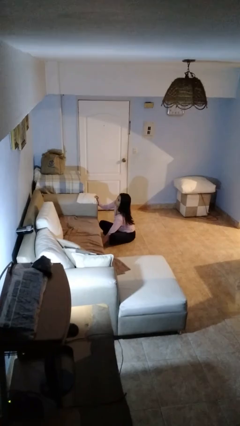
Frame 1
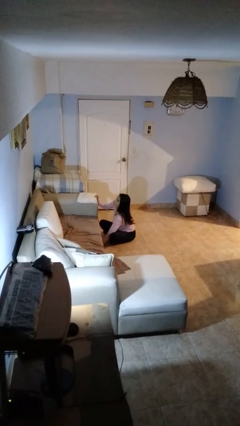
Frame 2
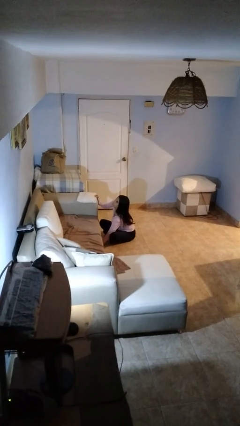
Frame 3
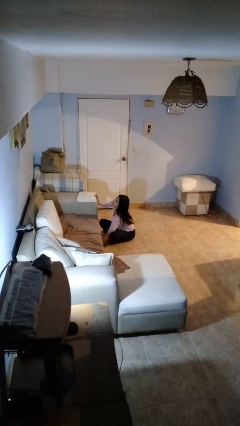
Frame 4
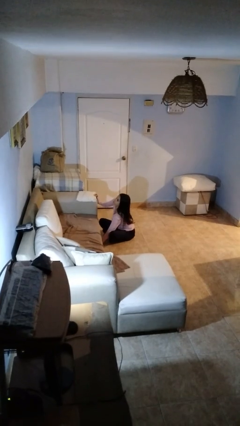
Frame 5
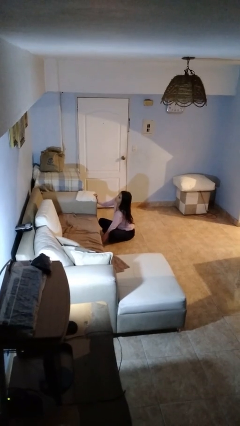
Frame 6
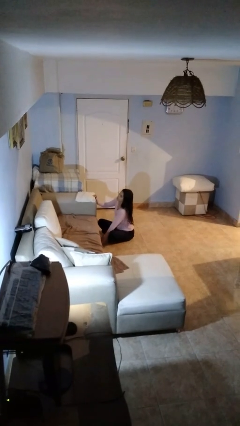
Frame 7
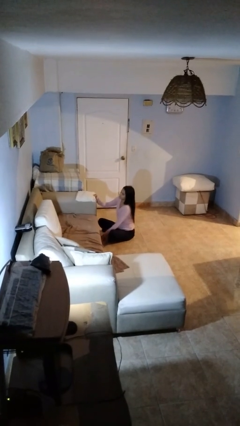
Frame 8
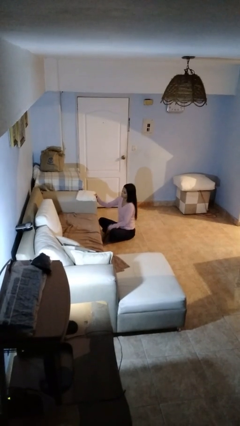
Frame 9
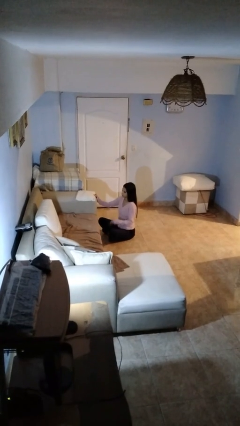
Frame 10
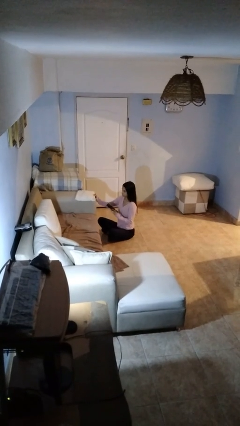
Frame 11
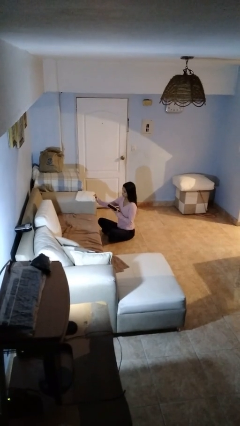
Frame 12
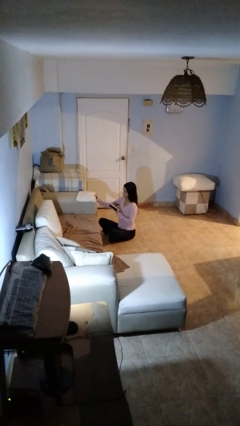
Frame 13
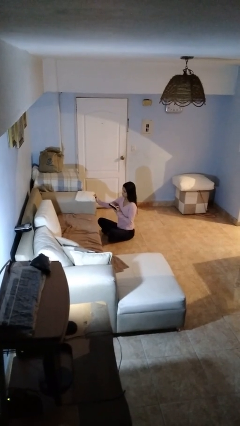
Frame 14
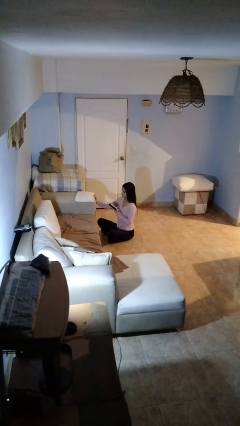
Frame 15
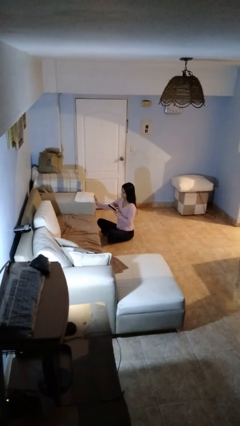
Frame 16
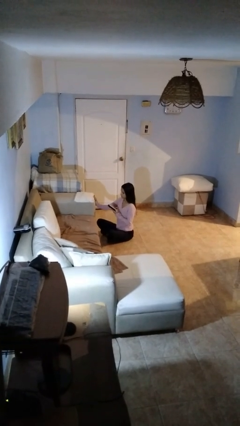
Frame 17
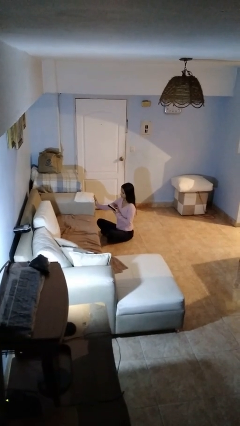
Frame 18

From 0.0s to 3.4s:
person searches under couch

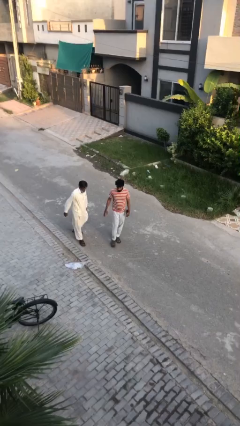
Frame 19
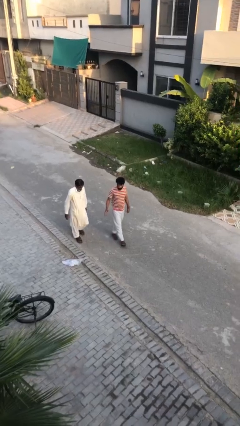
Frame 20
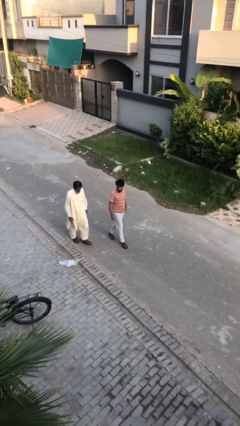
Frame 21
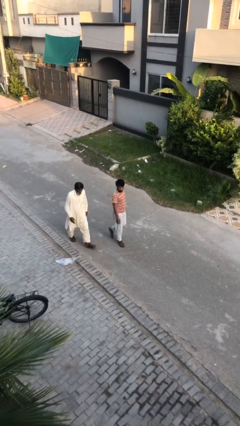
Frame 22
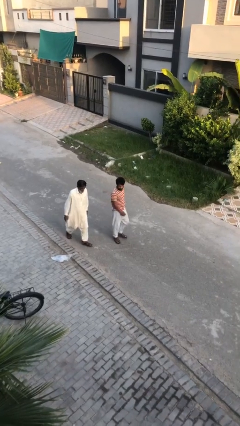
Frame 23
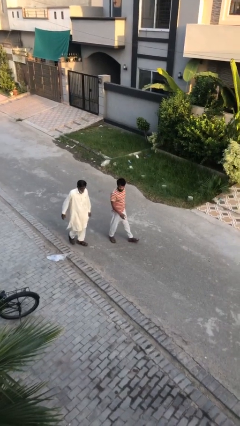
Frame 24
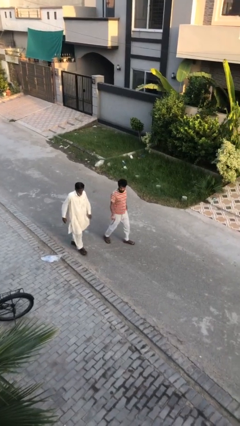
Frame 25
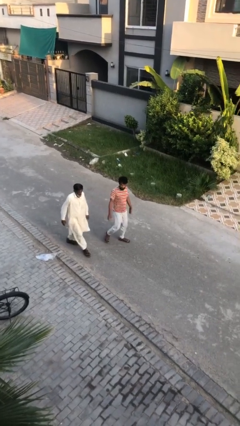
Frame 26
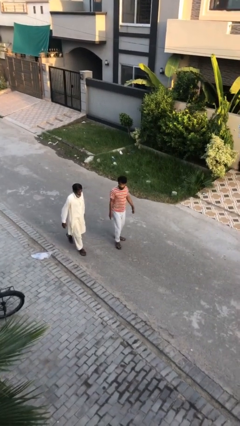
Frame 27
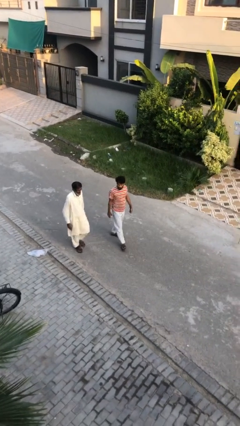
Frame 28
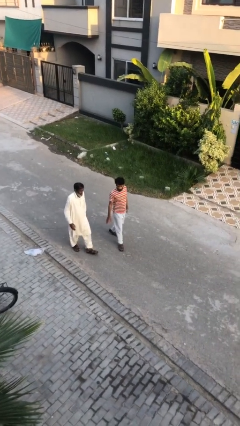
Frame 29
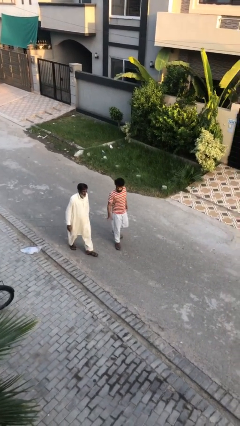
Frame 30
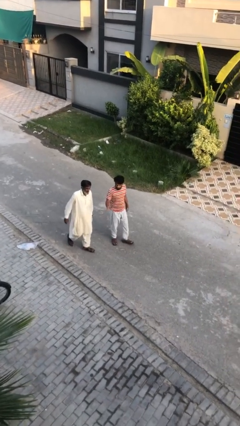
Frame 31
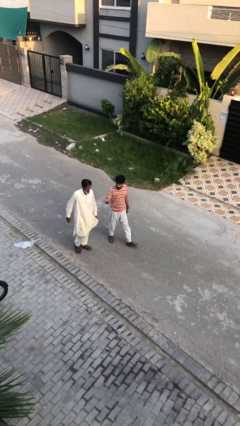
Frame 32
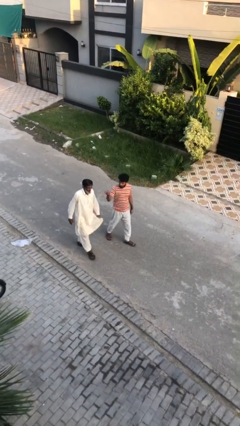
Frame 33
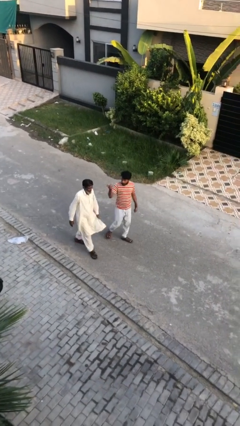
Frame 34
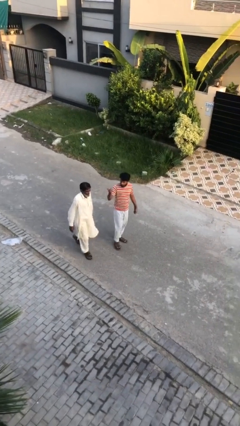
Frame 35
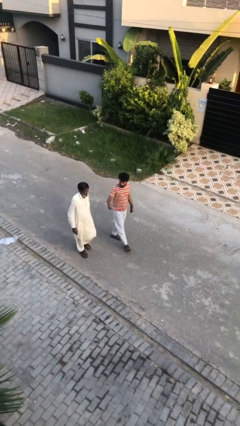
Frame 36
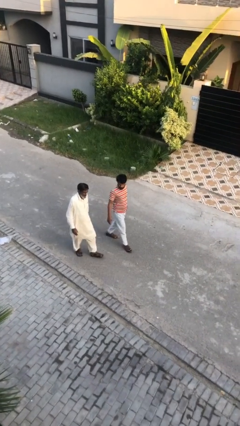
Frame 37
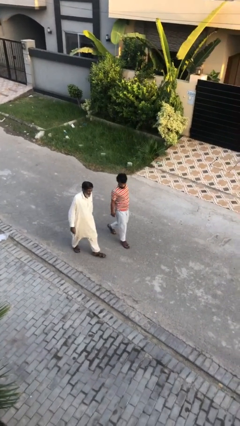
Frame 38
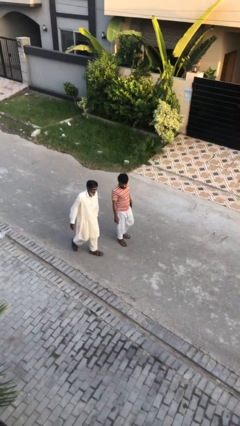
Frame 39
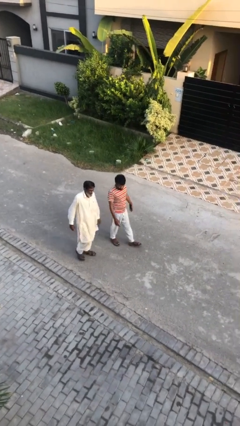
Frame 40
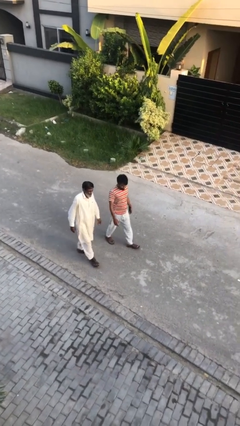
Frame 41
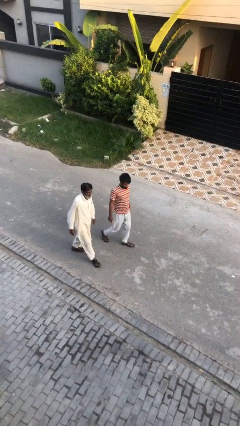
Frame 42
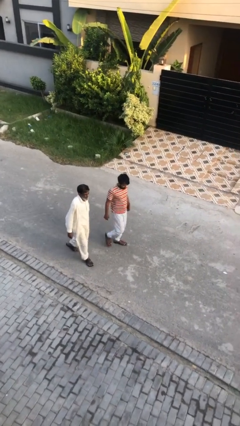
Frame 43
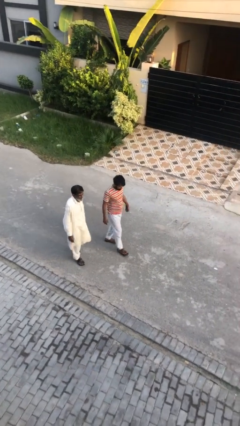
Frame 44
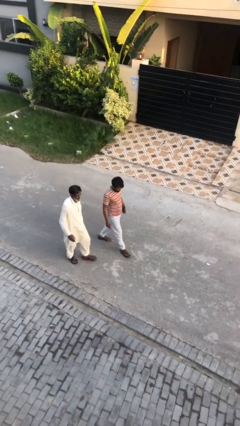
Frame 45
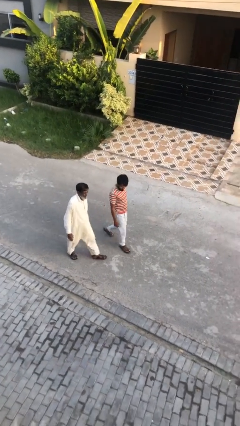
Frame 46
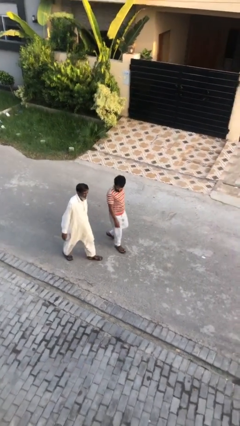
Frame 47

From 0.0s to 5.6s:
person talks to person

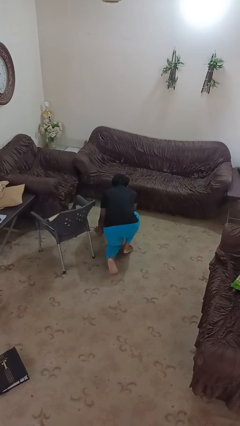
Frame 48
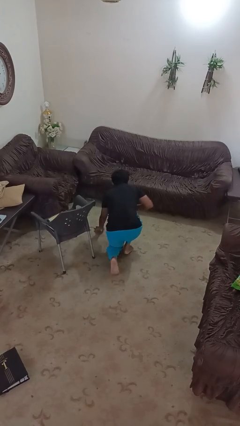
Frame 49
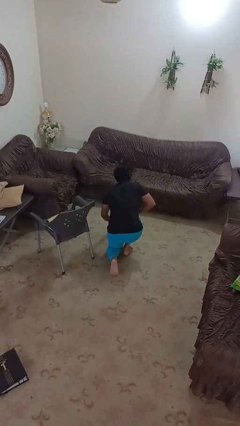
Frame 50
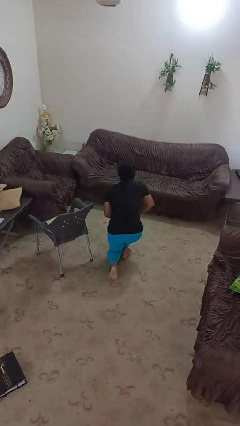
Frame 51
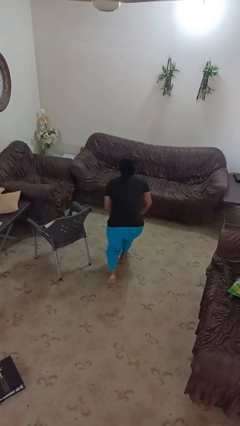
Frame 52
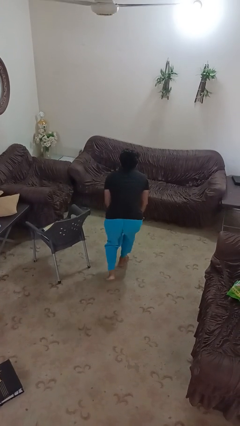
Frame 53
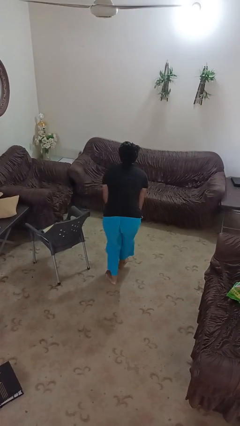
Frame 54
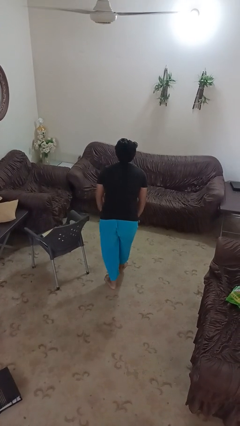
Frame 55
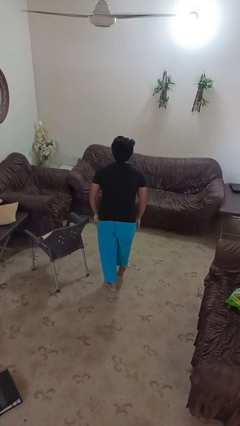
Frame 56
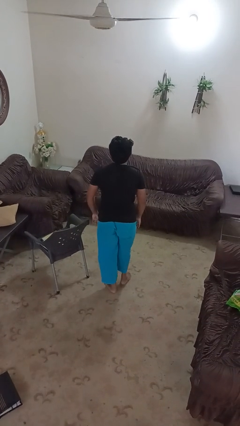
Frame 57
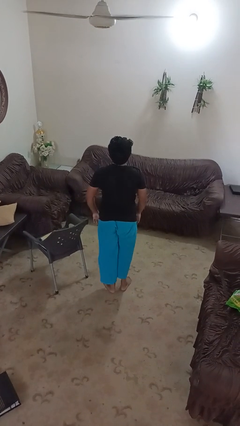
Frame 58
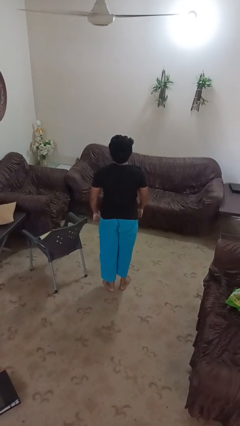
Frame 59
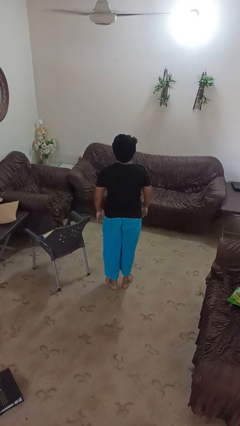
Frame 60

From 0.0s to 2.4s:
person stands up from floor

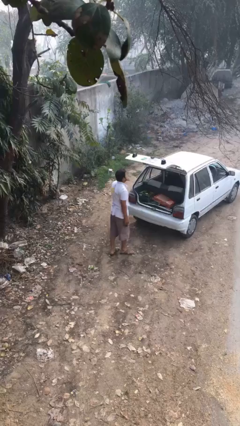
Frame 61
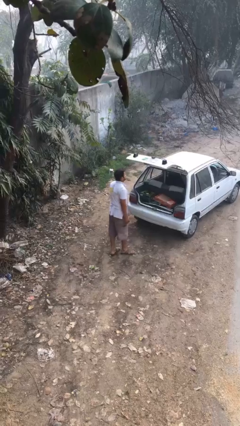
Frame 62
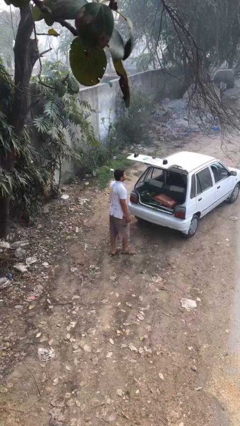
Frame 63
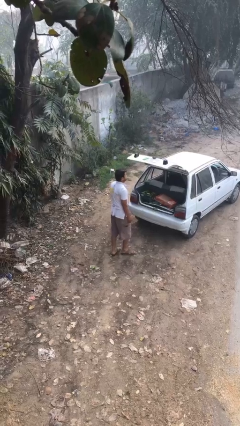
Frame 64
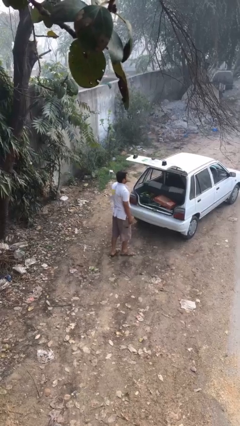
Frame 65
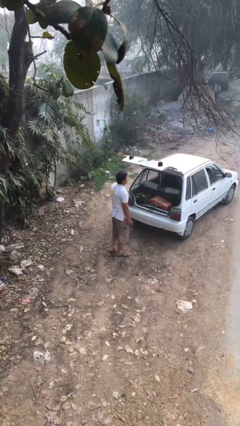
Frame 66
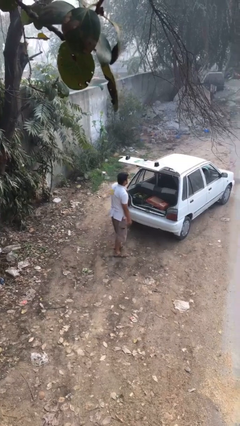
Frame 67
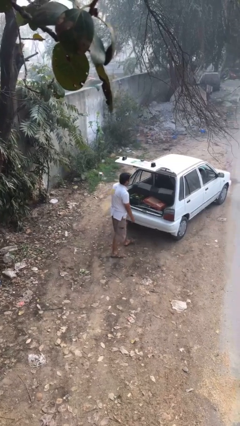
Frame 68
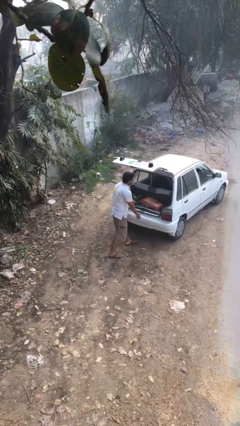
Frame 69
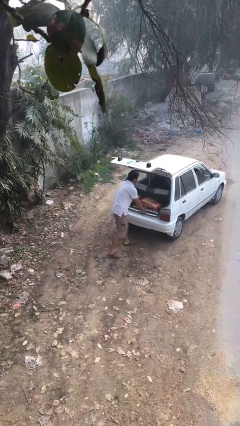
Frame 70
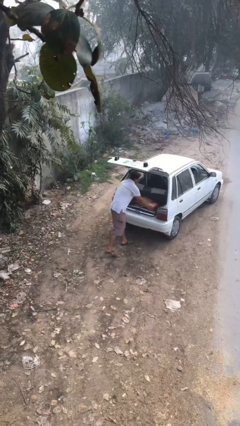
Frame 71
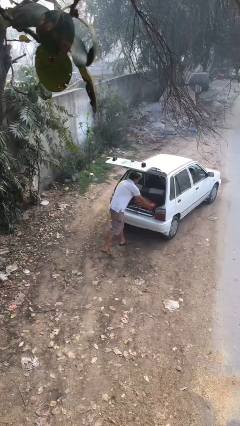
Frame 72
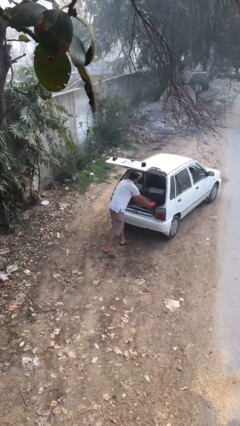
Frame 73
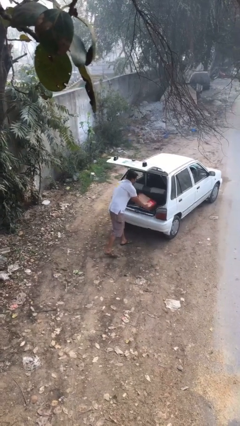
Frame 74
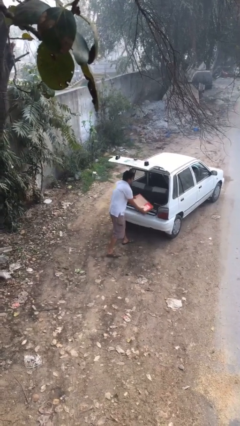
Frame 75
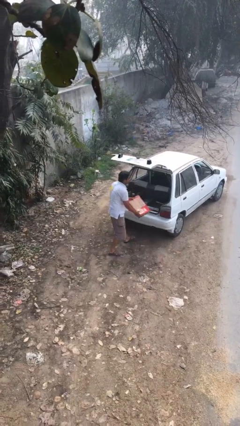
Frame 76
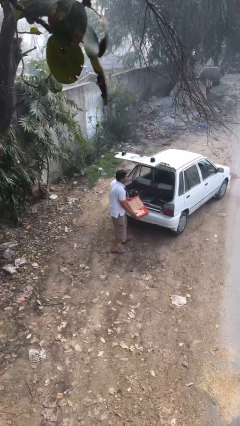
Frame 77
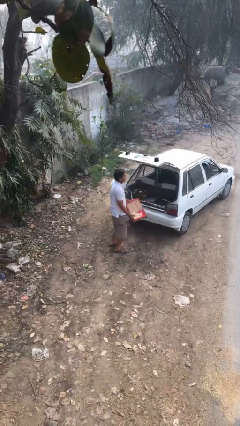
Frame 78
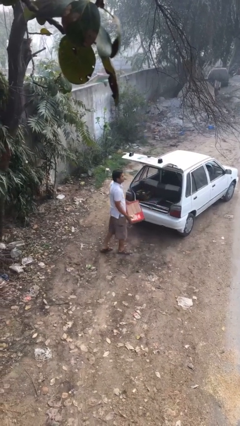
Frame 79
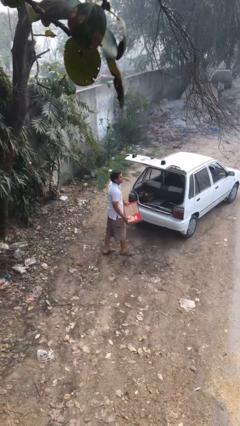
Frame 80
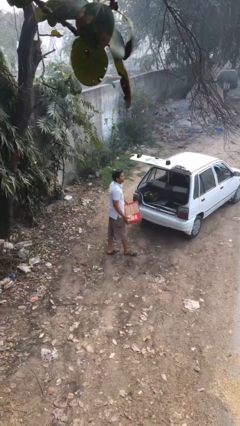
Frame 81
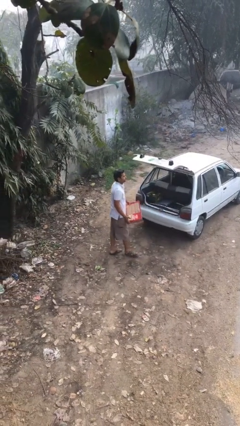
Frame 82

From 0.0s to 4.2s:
person unloads car

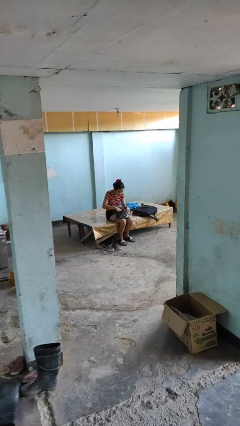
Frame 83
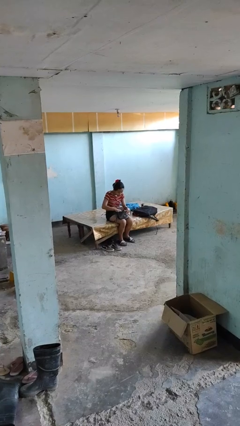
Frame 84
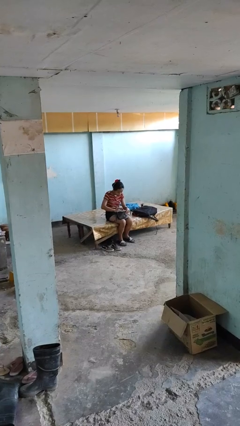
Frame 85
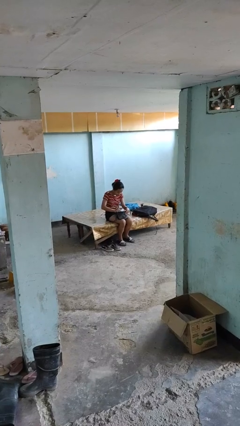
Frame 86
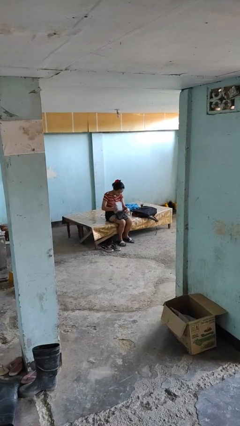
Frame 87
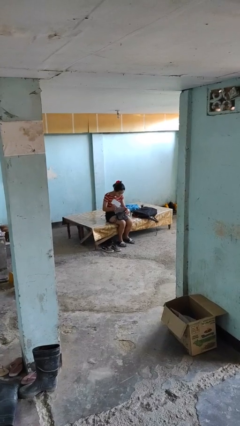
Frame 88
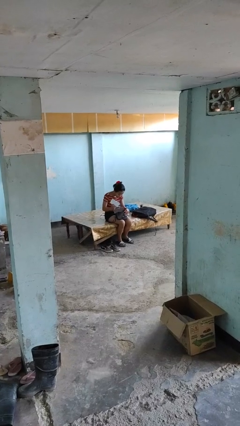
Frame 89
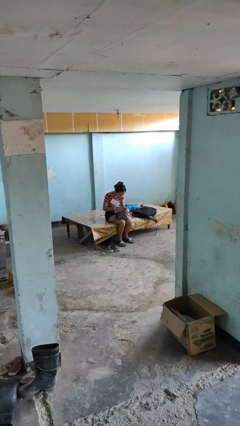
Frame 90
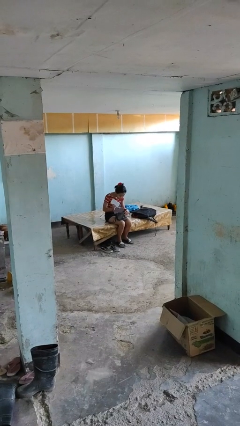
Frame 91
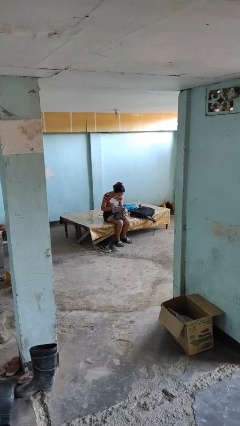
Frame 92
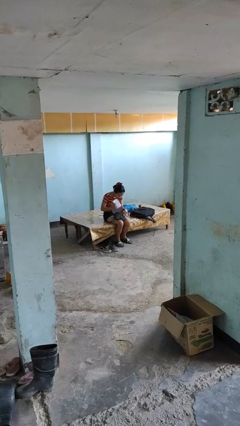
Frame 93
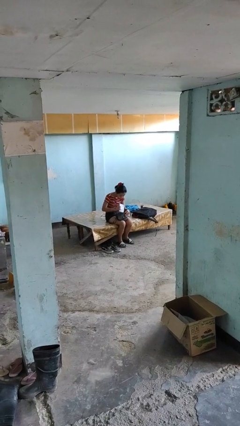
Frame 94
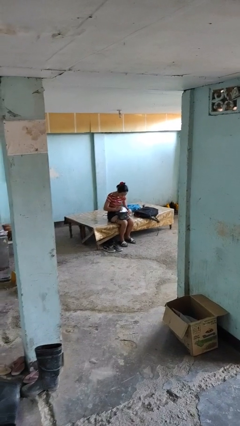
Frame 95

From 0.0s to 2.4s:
person takes object from purse
